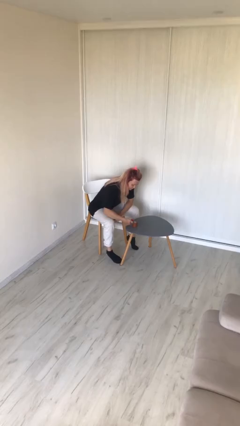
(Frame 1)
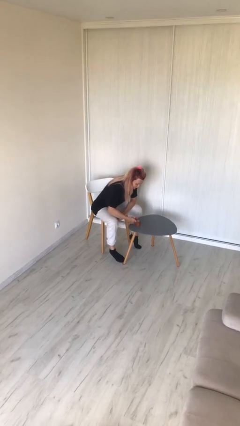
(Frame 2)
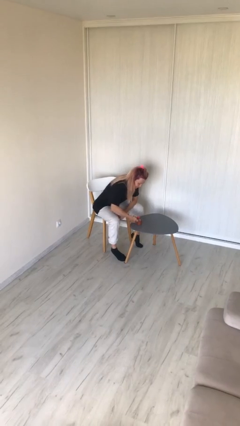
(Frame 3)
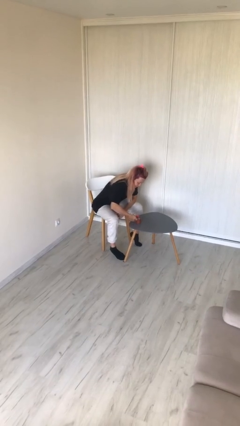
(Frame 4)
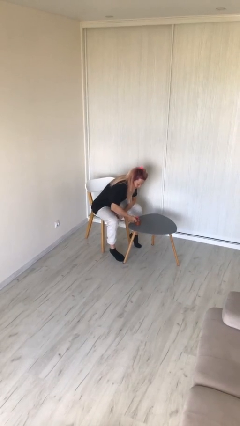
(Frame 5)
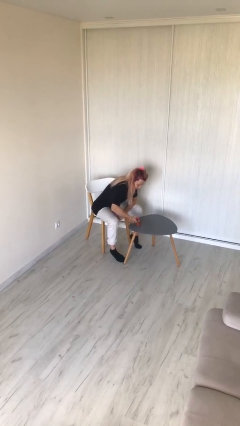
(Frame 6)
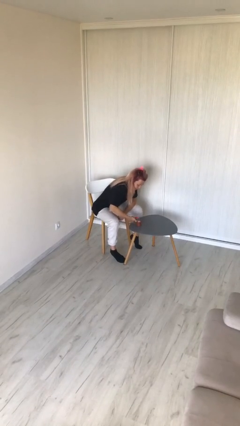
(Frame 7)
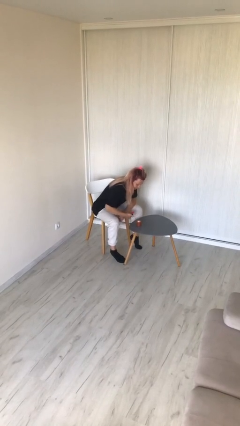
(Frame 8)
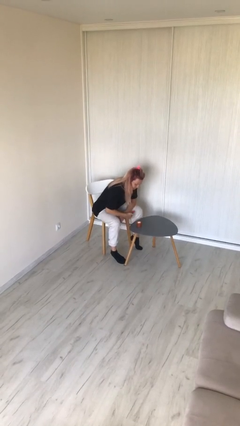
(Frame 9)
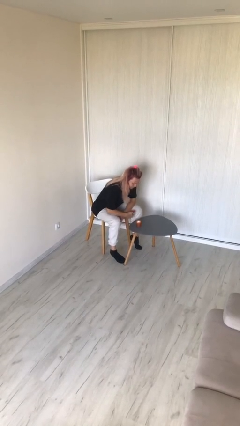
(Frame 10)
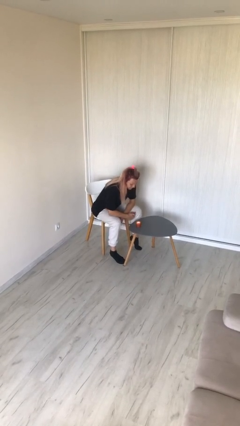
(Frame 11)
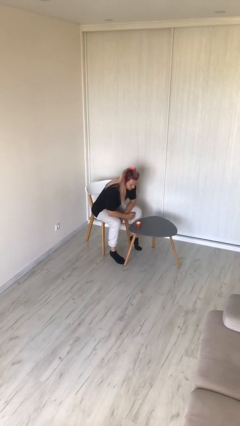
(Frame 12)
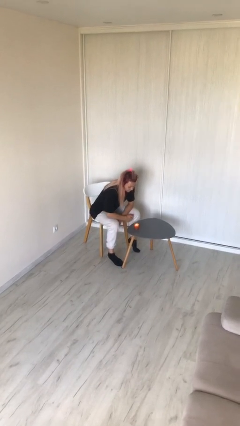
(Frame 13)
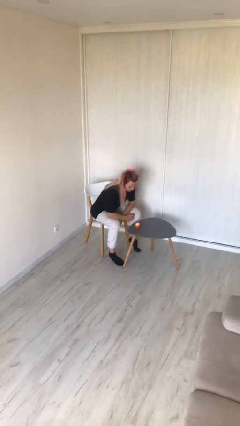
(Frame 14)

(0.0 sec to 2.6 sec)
person lights candle

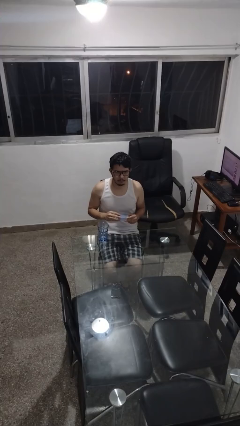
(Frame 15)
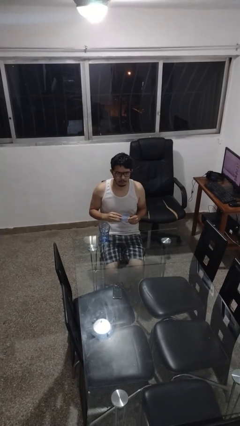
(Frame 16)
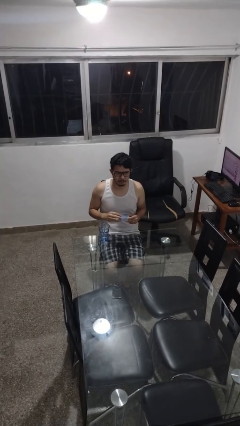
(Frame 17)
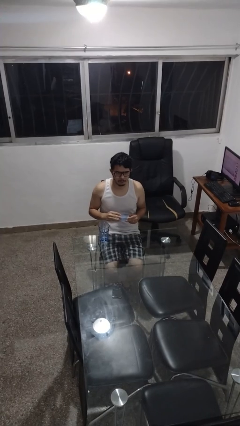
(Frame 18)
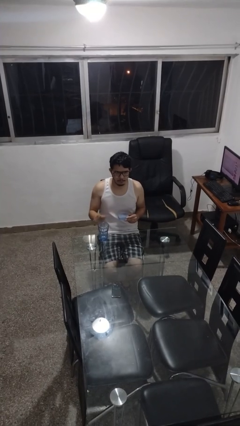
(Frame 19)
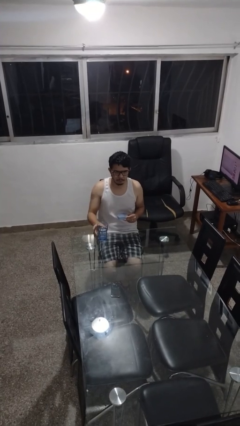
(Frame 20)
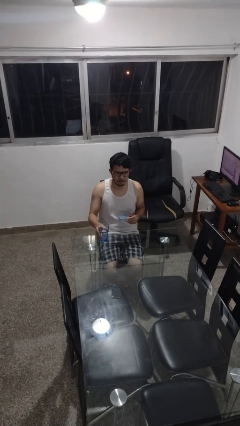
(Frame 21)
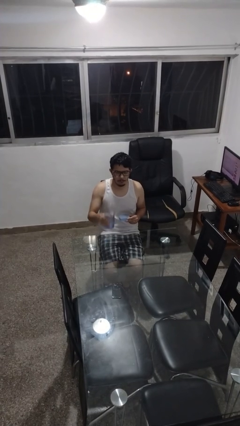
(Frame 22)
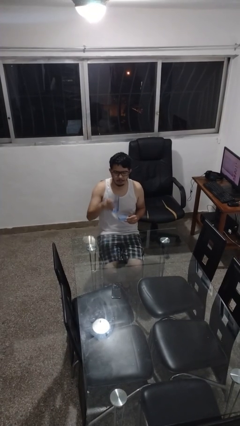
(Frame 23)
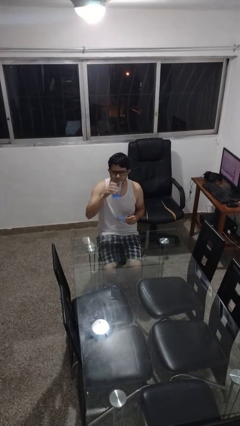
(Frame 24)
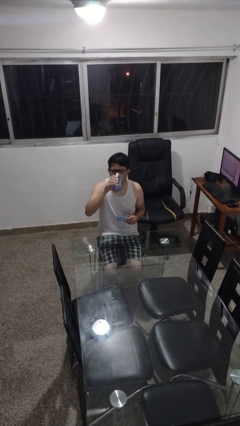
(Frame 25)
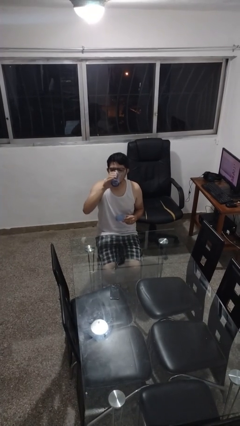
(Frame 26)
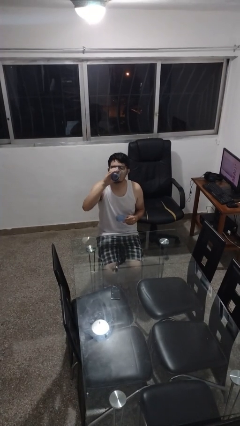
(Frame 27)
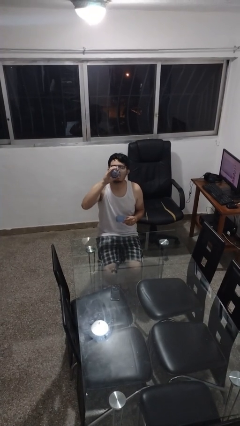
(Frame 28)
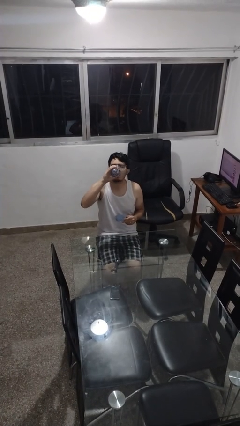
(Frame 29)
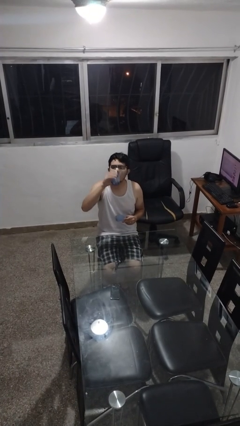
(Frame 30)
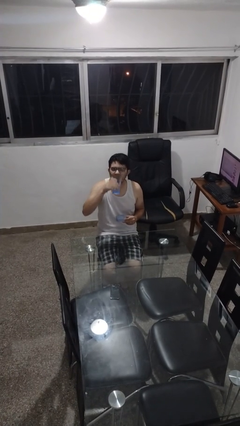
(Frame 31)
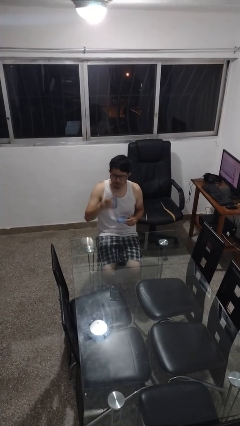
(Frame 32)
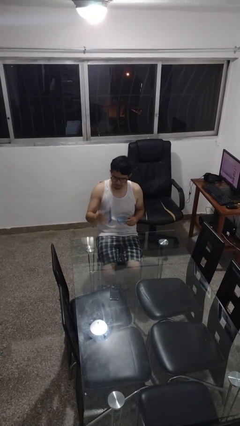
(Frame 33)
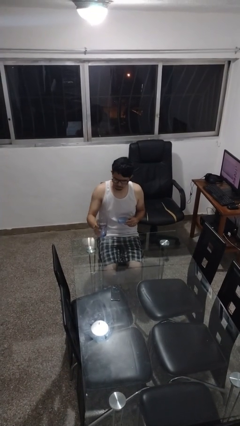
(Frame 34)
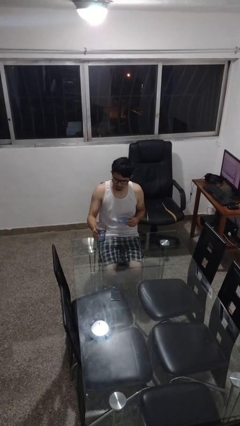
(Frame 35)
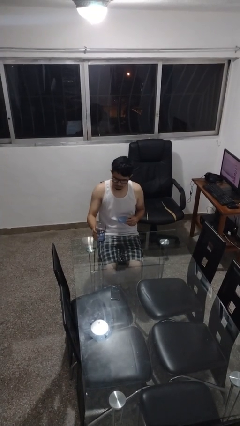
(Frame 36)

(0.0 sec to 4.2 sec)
person drinks from cup

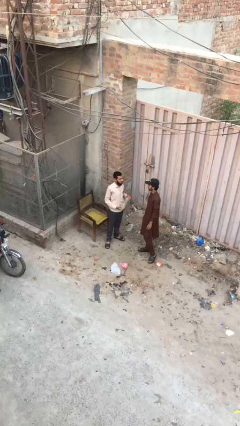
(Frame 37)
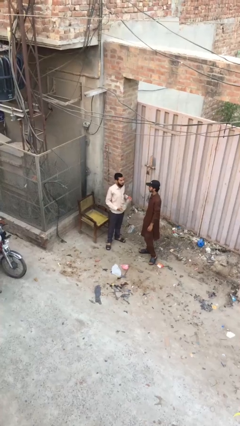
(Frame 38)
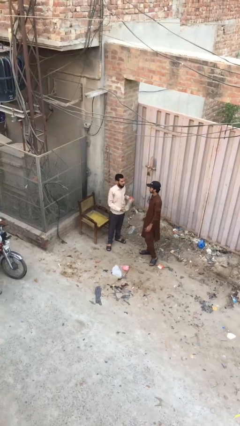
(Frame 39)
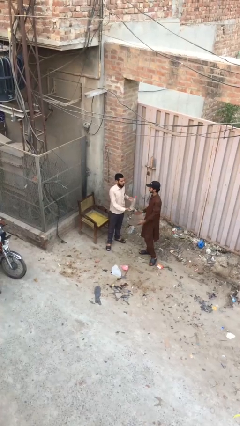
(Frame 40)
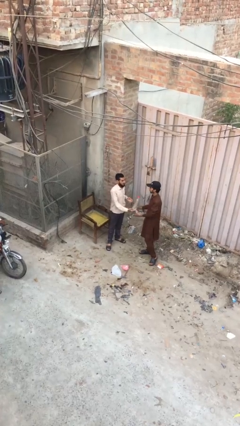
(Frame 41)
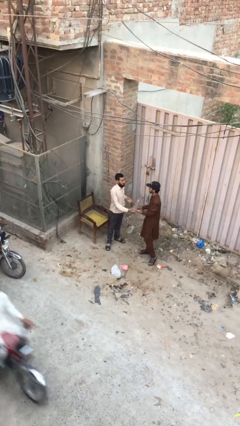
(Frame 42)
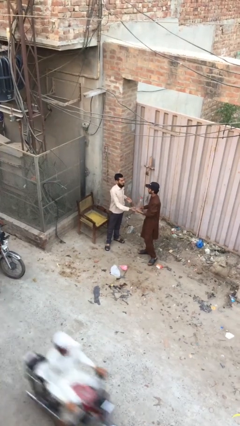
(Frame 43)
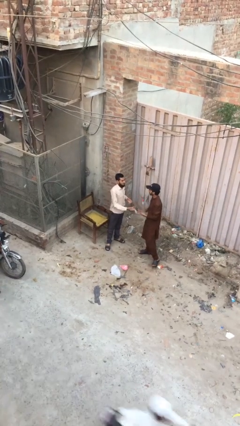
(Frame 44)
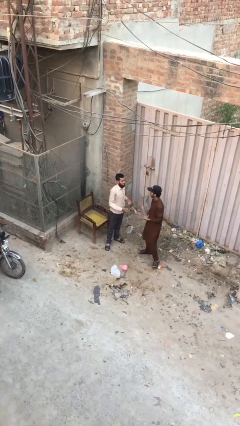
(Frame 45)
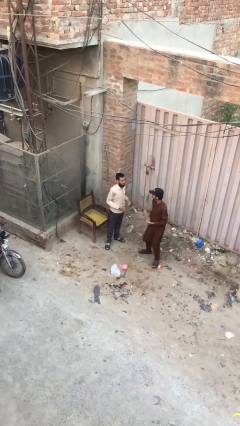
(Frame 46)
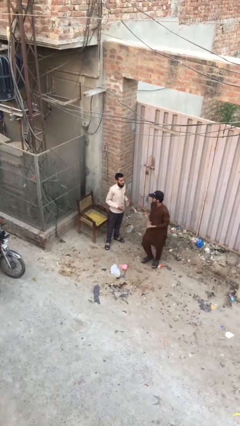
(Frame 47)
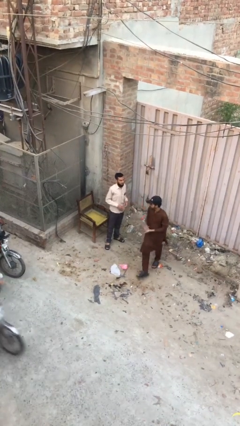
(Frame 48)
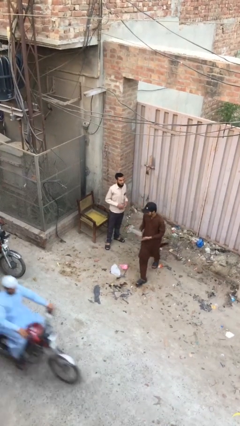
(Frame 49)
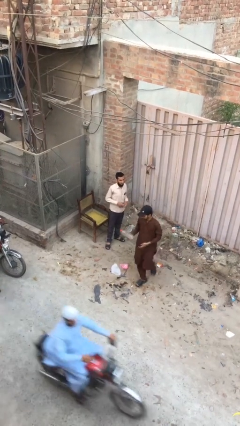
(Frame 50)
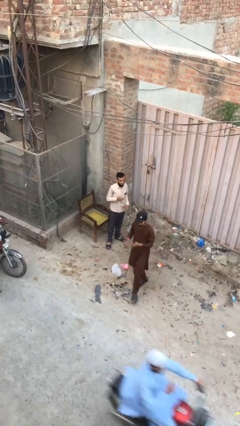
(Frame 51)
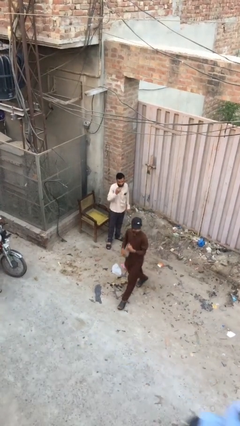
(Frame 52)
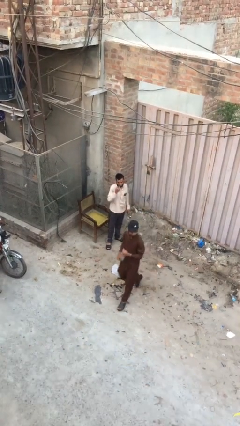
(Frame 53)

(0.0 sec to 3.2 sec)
person transfers object to person

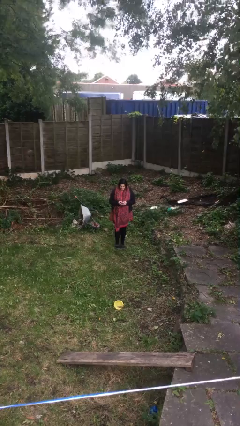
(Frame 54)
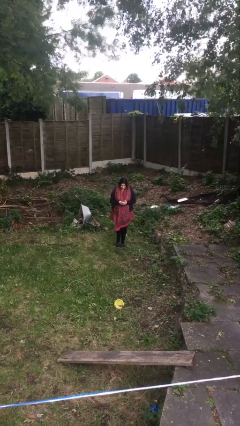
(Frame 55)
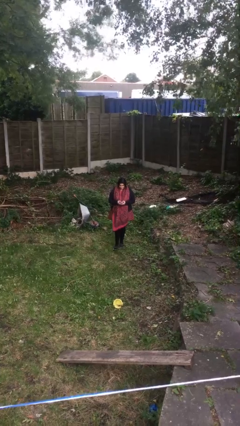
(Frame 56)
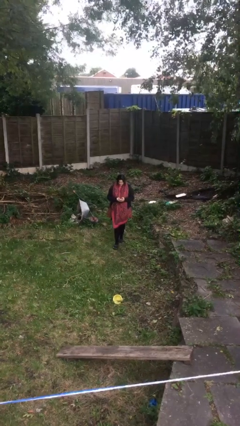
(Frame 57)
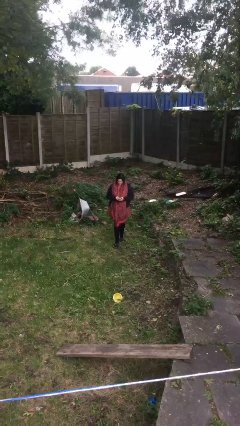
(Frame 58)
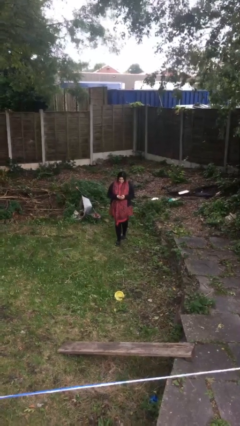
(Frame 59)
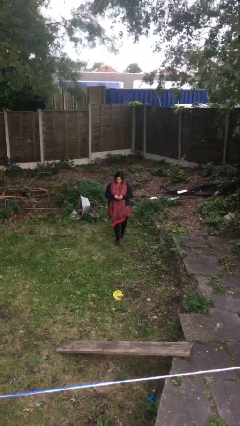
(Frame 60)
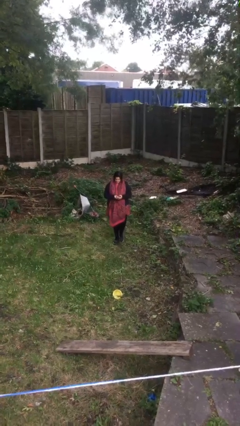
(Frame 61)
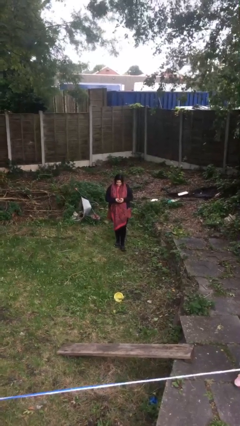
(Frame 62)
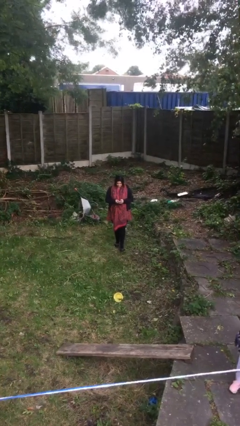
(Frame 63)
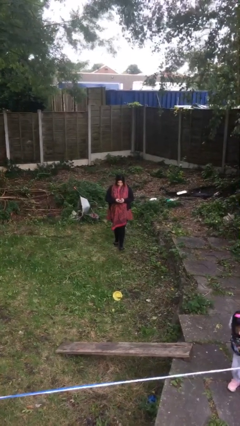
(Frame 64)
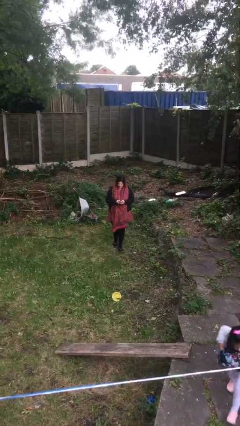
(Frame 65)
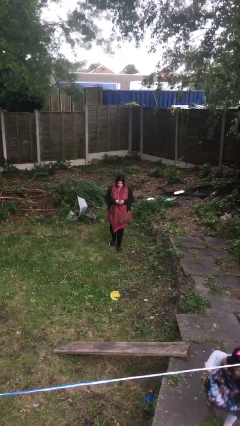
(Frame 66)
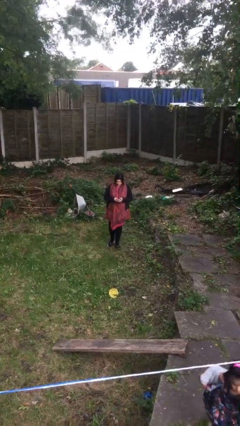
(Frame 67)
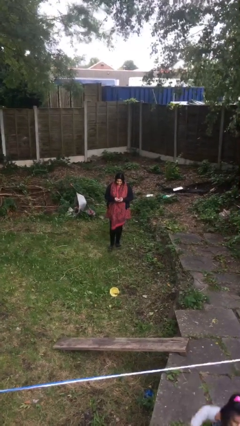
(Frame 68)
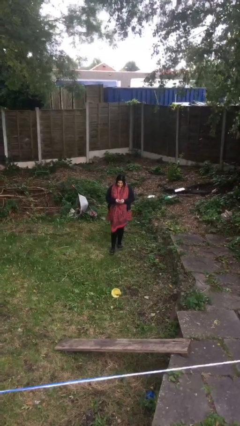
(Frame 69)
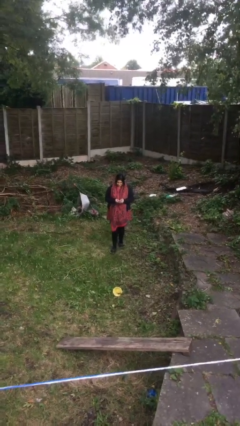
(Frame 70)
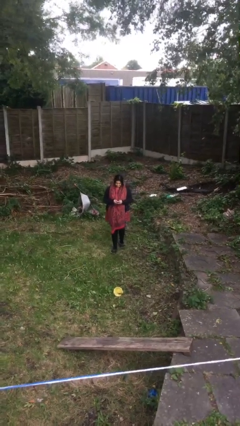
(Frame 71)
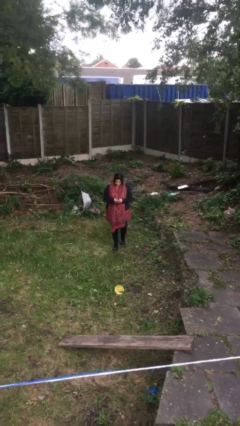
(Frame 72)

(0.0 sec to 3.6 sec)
person texts on phone

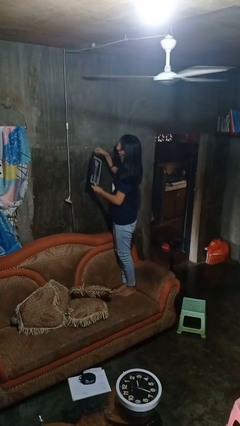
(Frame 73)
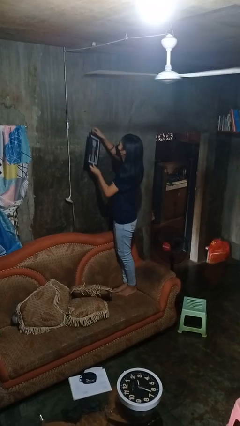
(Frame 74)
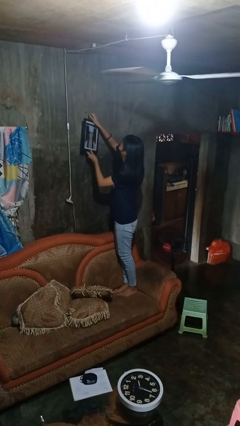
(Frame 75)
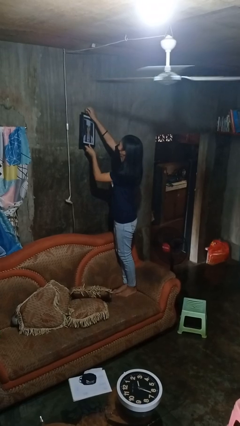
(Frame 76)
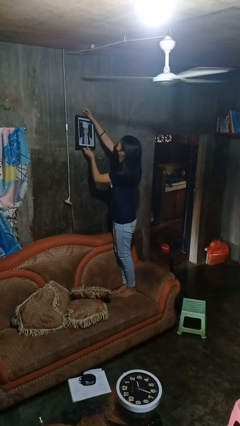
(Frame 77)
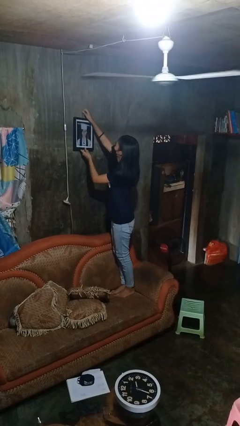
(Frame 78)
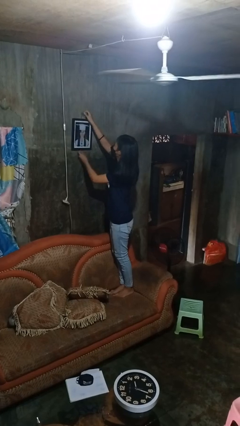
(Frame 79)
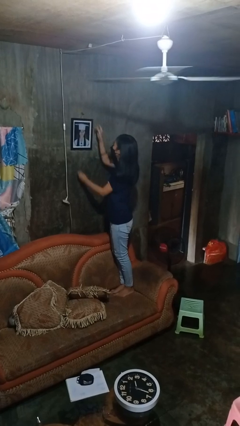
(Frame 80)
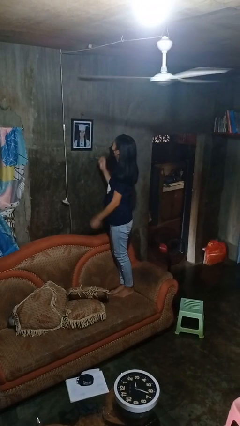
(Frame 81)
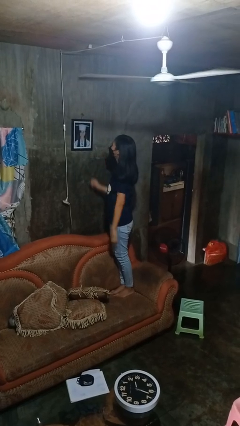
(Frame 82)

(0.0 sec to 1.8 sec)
person puts up picture frame

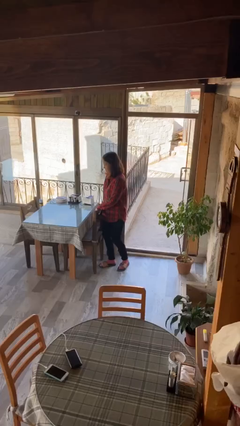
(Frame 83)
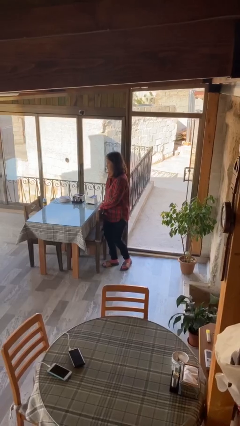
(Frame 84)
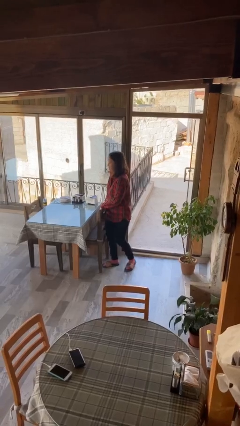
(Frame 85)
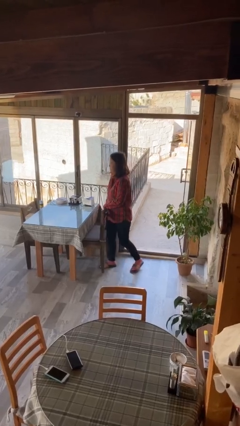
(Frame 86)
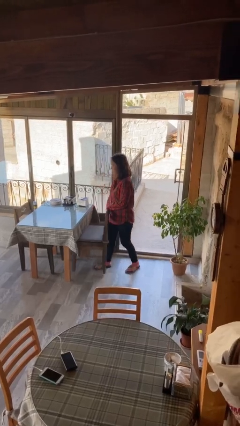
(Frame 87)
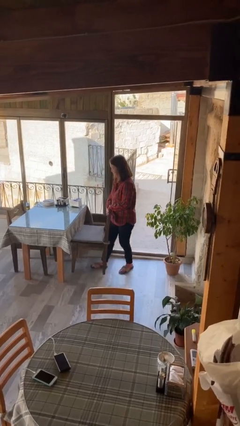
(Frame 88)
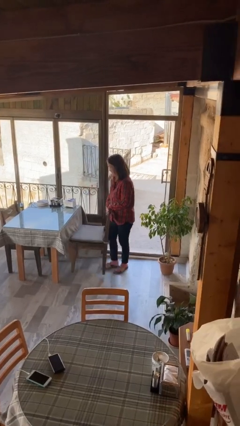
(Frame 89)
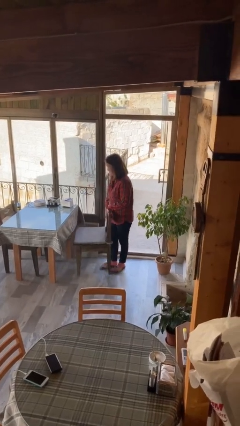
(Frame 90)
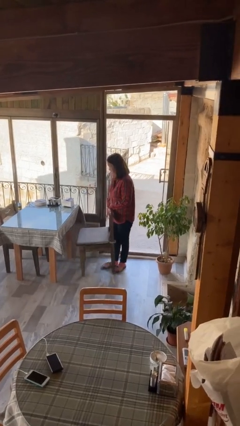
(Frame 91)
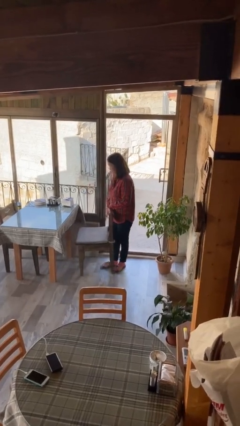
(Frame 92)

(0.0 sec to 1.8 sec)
person pulls out chair

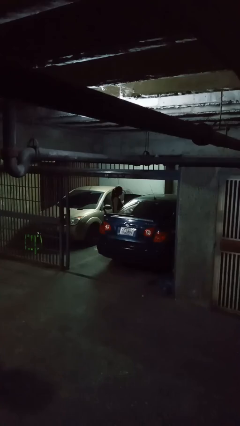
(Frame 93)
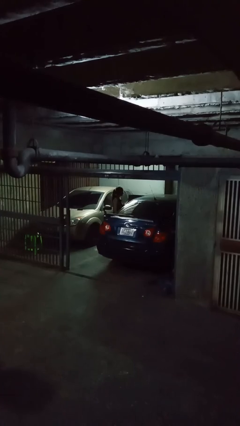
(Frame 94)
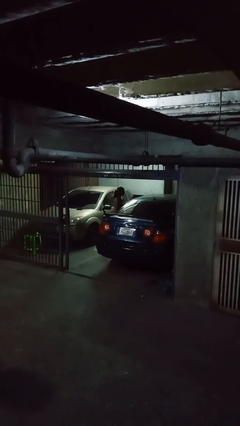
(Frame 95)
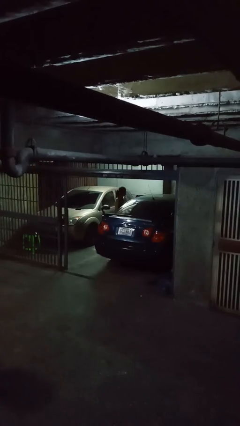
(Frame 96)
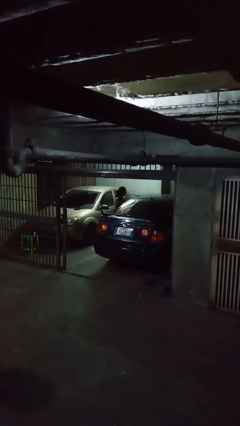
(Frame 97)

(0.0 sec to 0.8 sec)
person closes car door
